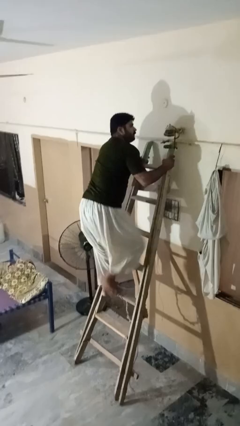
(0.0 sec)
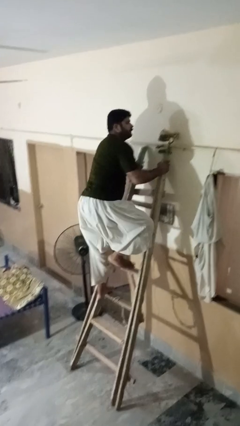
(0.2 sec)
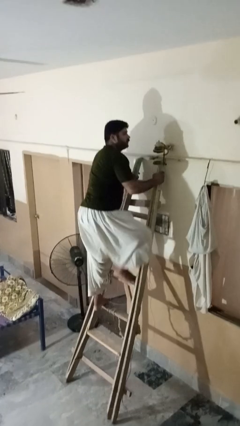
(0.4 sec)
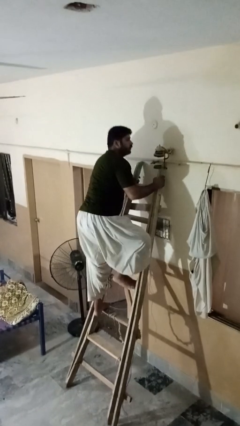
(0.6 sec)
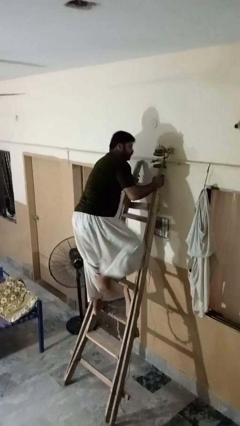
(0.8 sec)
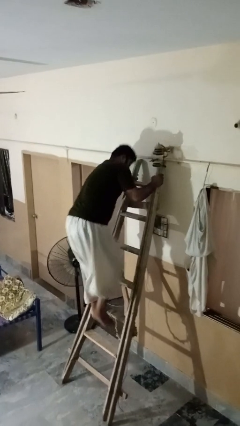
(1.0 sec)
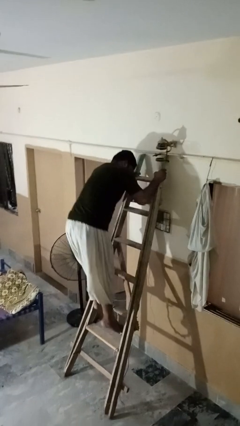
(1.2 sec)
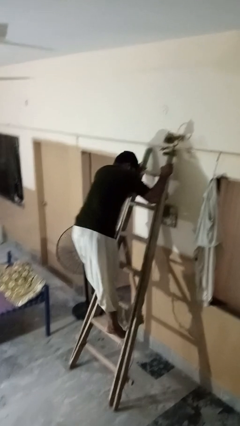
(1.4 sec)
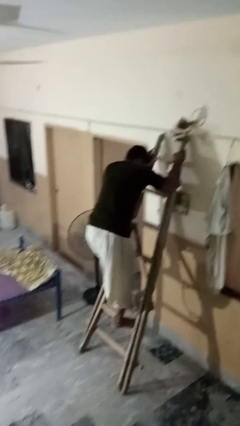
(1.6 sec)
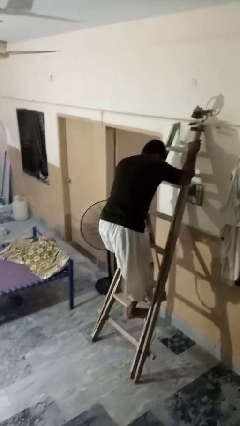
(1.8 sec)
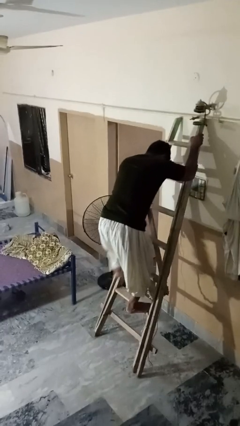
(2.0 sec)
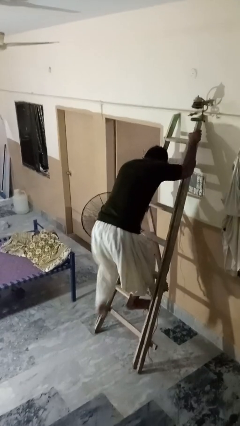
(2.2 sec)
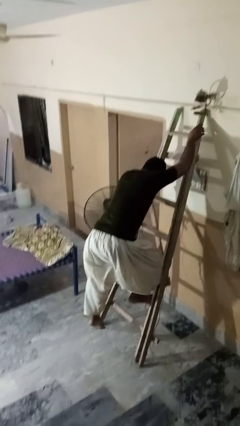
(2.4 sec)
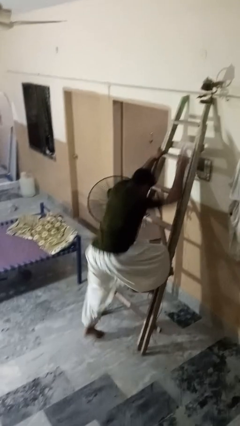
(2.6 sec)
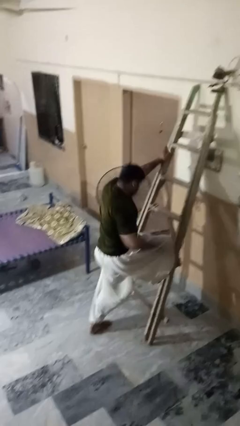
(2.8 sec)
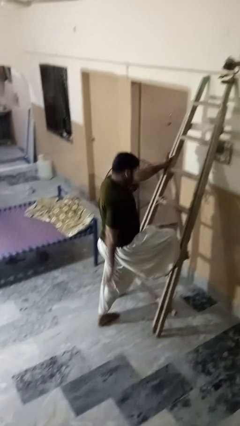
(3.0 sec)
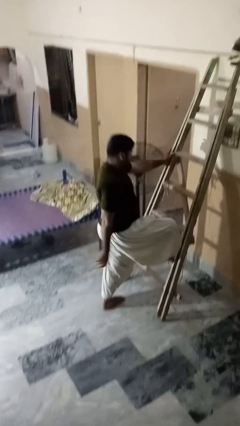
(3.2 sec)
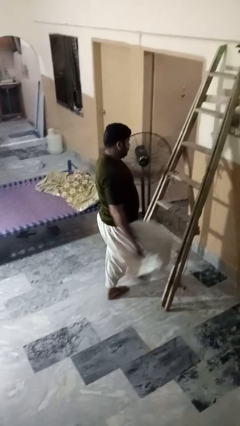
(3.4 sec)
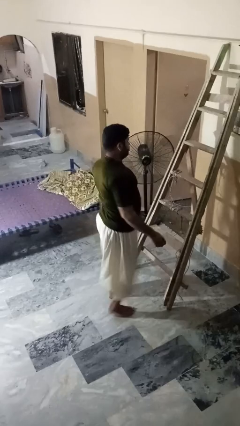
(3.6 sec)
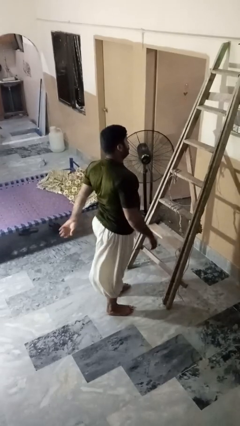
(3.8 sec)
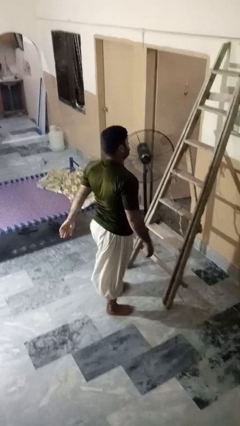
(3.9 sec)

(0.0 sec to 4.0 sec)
person climbs down ladder

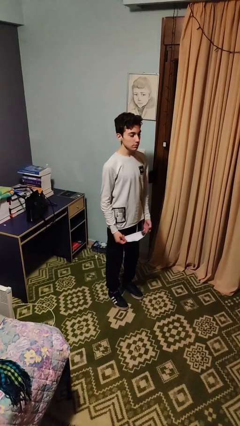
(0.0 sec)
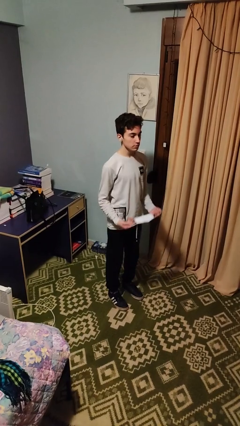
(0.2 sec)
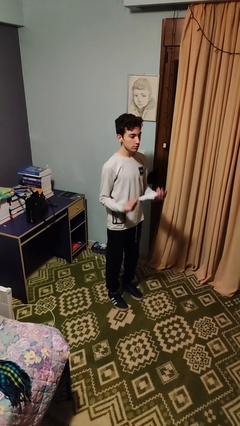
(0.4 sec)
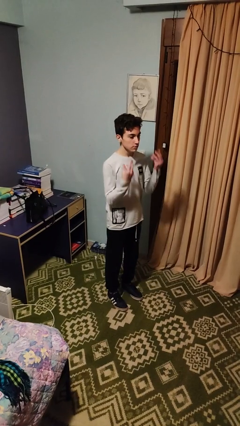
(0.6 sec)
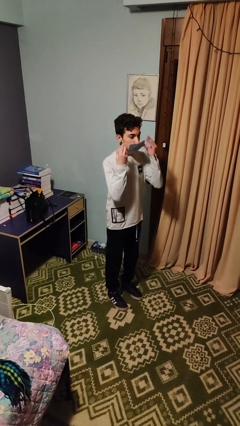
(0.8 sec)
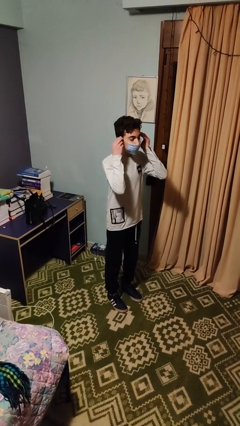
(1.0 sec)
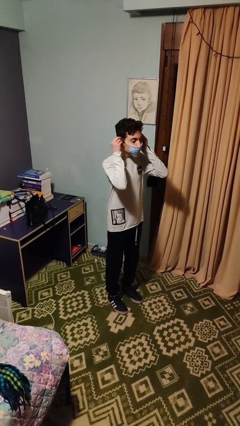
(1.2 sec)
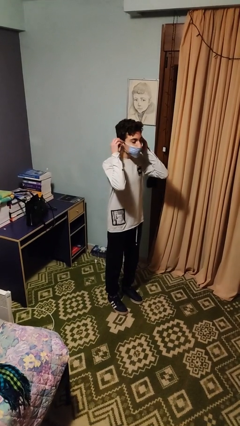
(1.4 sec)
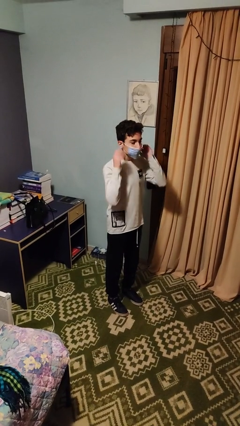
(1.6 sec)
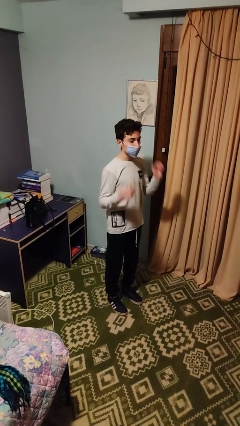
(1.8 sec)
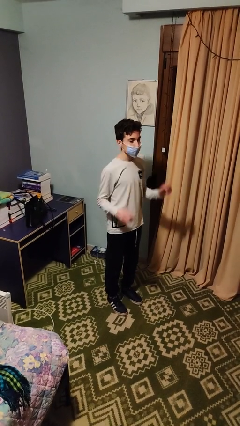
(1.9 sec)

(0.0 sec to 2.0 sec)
person puts on facemask

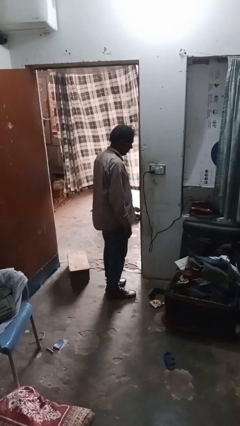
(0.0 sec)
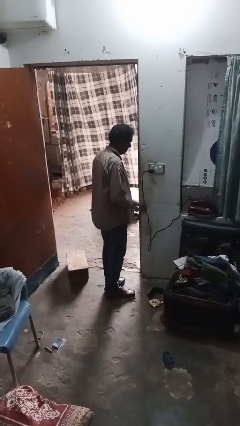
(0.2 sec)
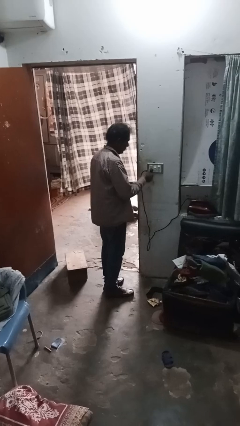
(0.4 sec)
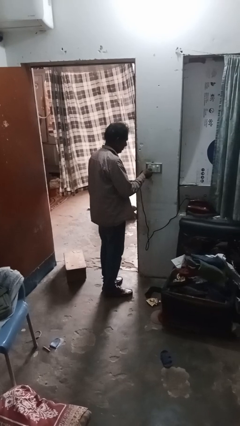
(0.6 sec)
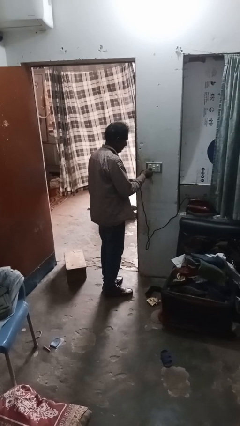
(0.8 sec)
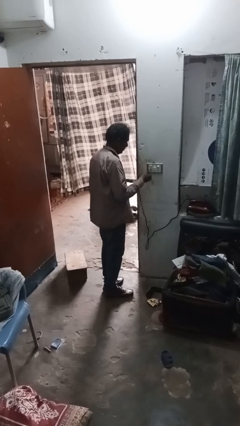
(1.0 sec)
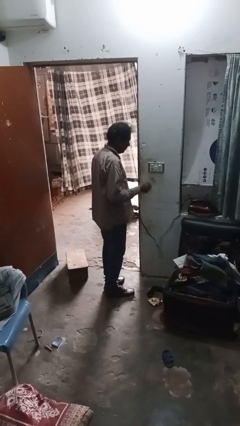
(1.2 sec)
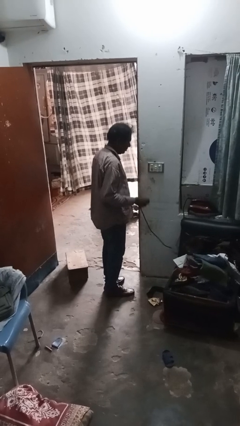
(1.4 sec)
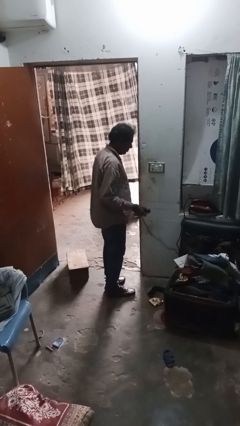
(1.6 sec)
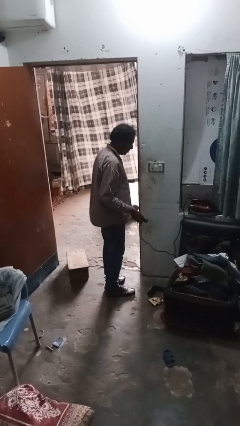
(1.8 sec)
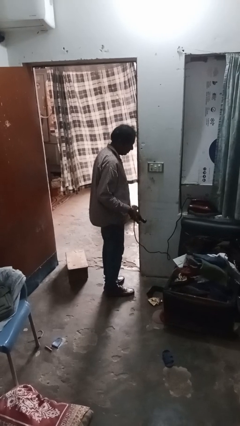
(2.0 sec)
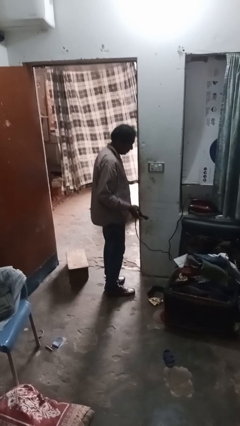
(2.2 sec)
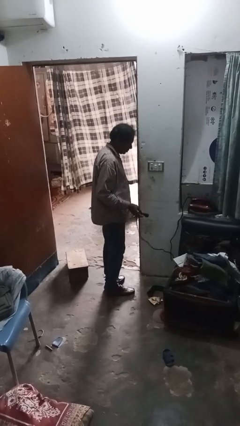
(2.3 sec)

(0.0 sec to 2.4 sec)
person unplugs from electrical socket

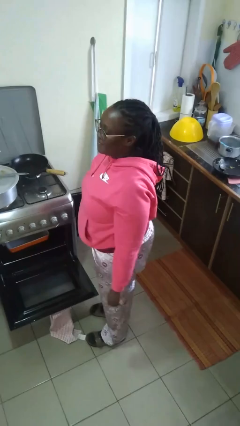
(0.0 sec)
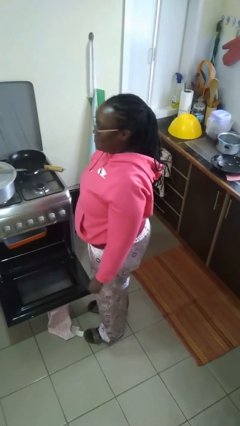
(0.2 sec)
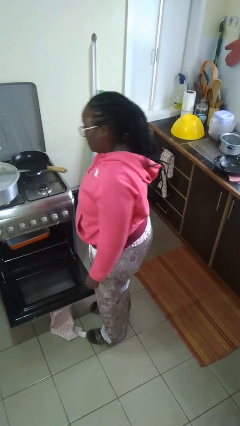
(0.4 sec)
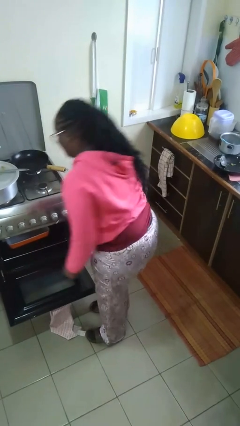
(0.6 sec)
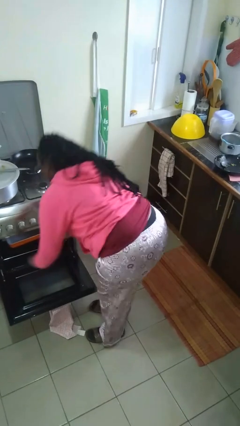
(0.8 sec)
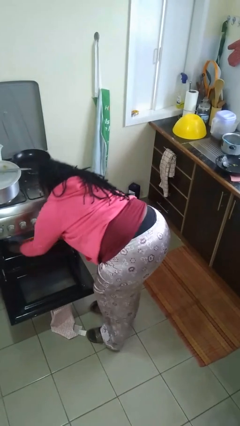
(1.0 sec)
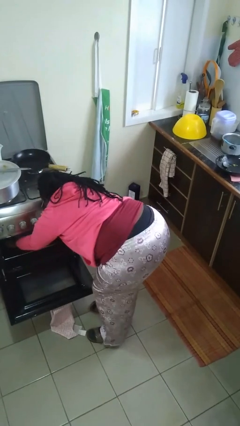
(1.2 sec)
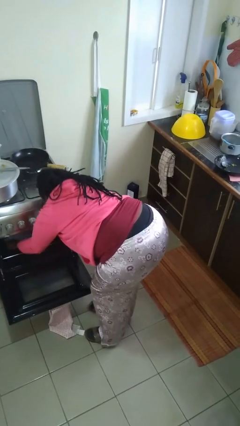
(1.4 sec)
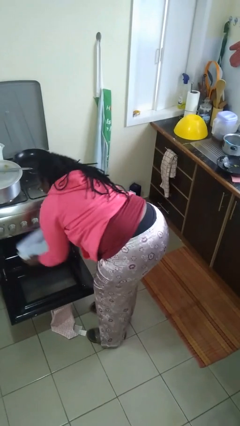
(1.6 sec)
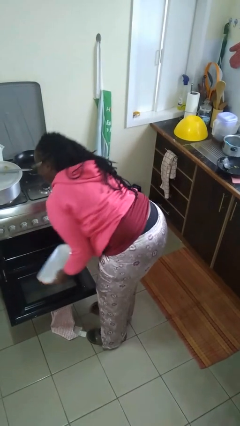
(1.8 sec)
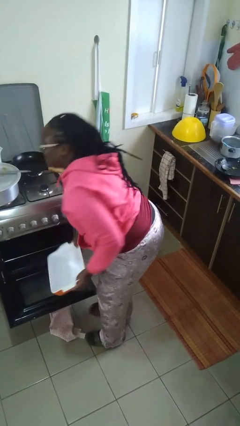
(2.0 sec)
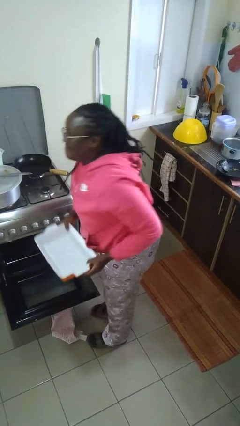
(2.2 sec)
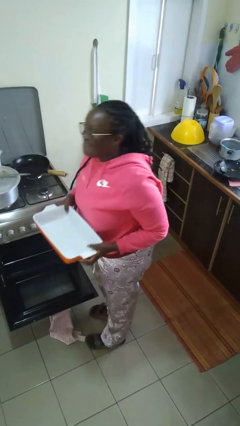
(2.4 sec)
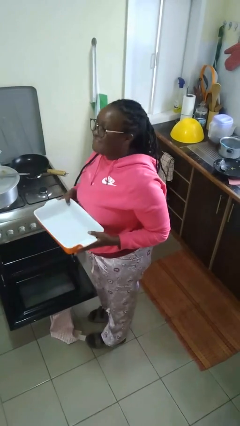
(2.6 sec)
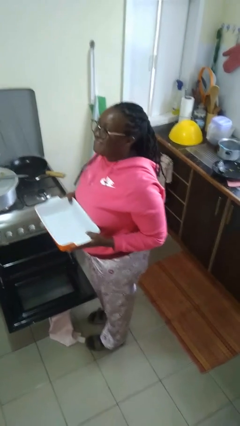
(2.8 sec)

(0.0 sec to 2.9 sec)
person takes object from oven

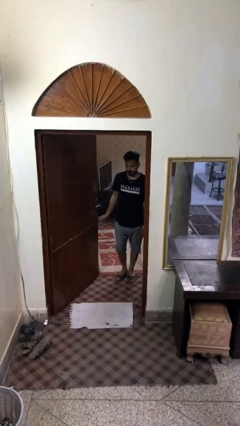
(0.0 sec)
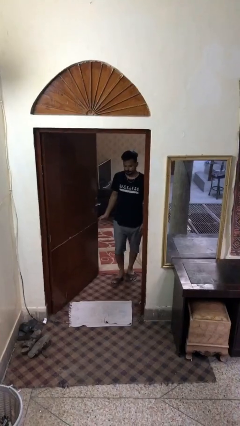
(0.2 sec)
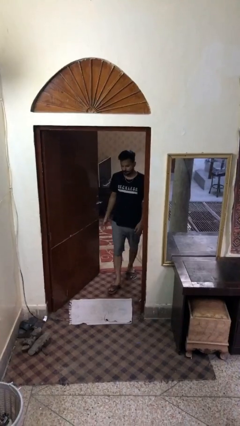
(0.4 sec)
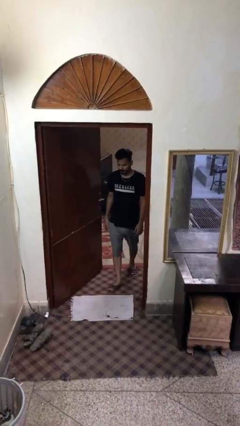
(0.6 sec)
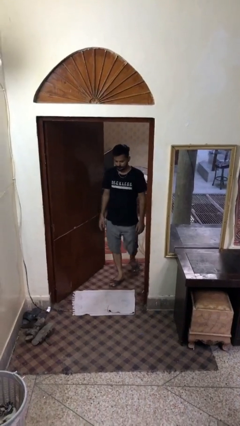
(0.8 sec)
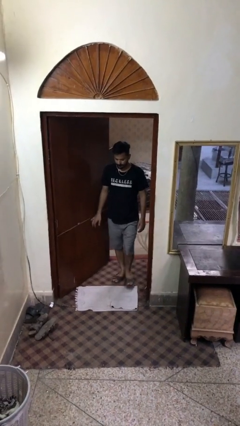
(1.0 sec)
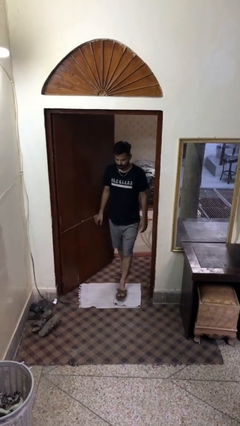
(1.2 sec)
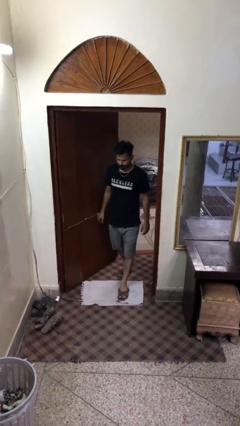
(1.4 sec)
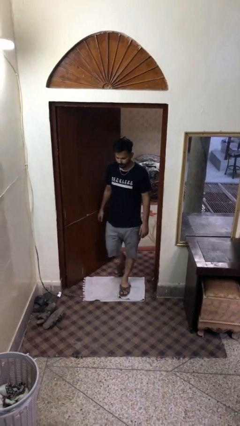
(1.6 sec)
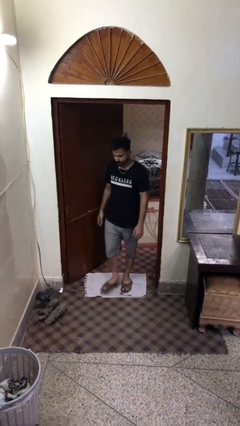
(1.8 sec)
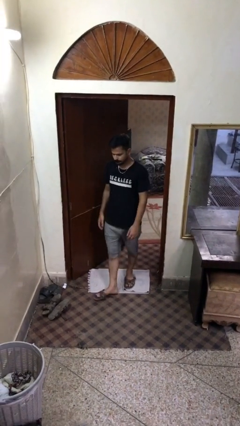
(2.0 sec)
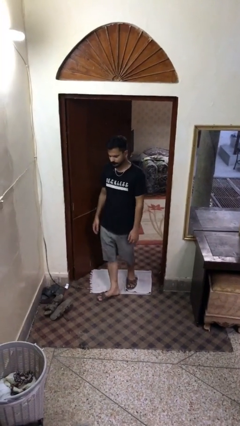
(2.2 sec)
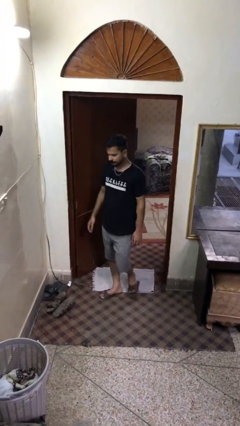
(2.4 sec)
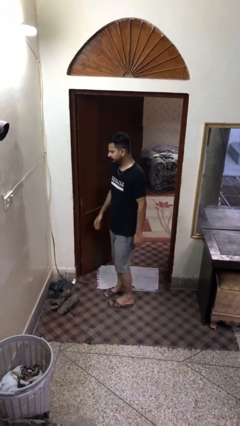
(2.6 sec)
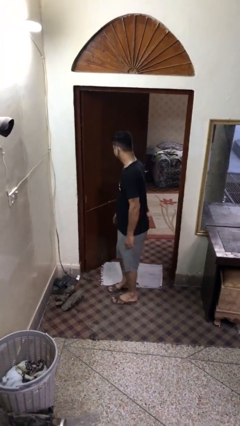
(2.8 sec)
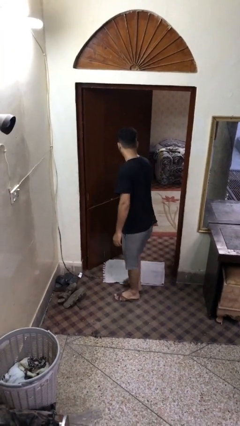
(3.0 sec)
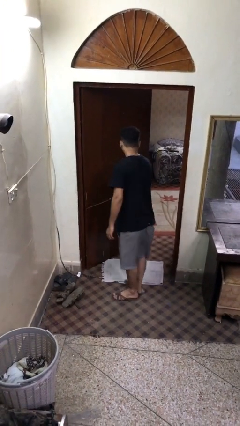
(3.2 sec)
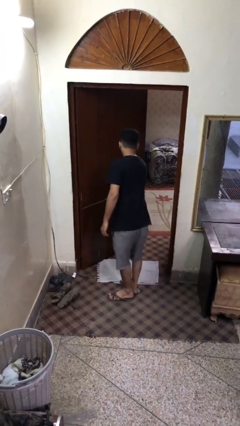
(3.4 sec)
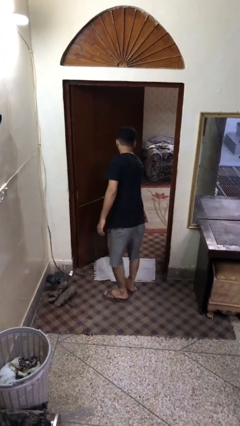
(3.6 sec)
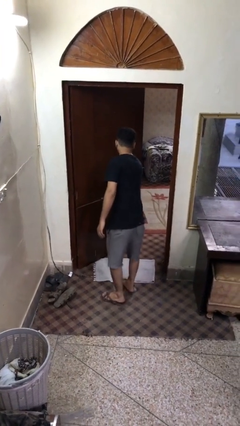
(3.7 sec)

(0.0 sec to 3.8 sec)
person enters scene through structure

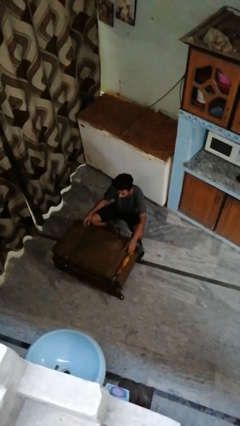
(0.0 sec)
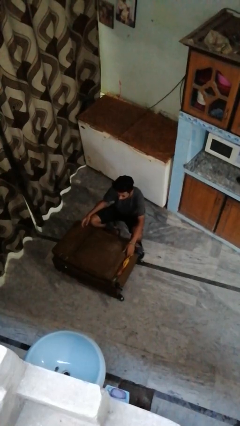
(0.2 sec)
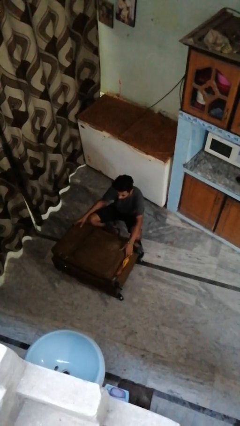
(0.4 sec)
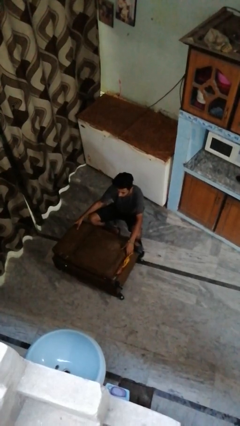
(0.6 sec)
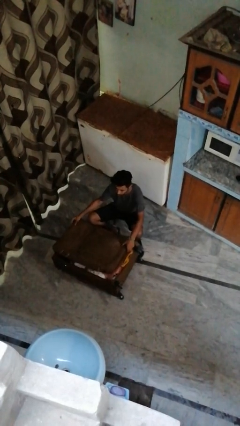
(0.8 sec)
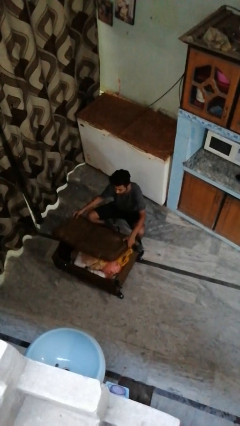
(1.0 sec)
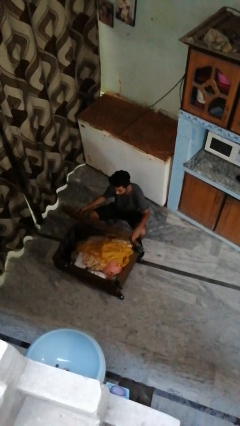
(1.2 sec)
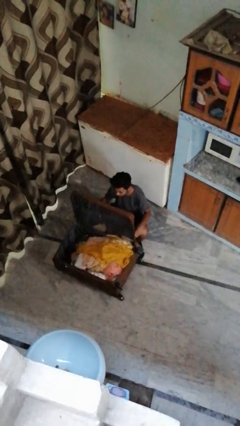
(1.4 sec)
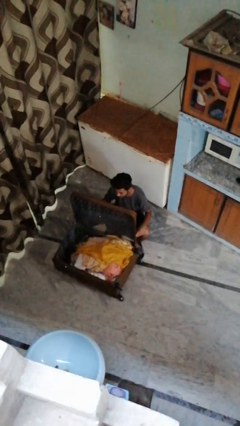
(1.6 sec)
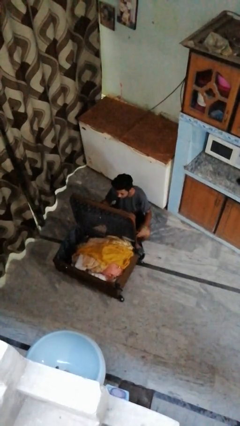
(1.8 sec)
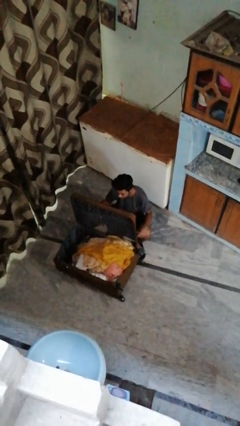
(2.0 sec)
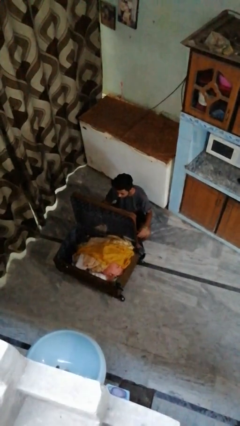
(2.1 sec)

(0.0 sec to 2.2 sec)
person opens suitcase

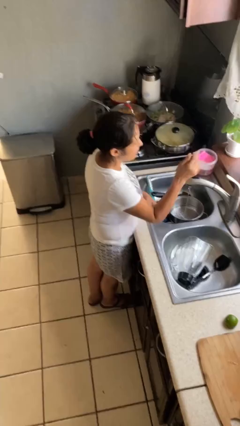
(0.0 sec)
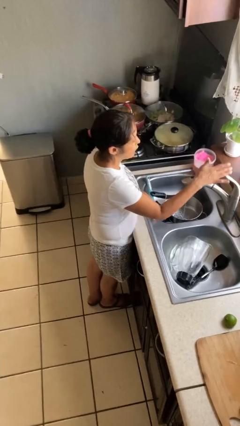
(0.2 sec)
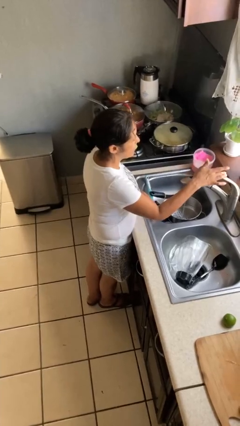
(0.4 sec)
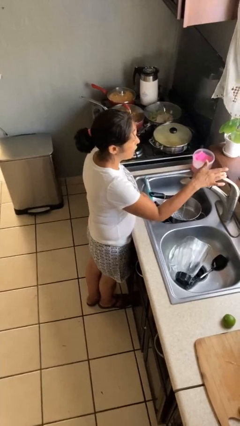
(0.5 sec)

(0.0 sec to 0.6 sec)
person turns off faucet
